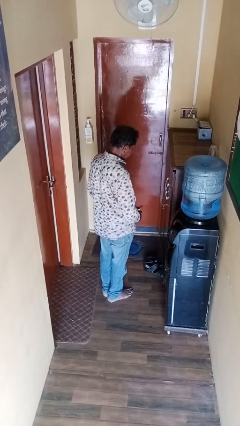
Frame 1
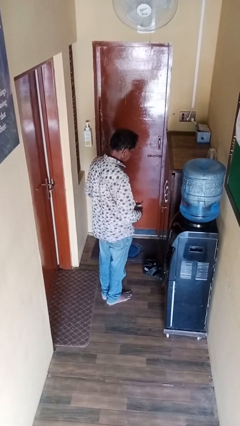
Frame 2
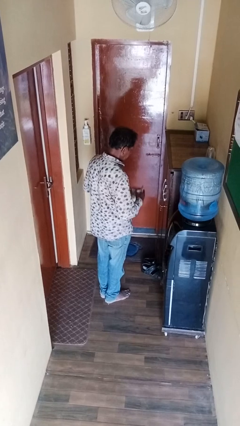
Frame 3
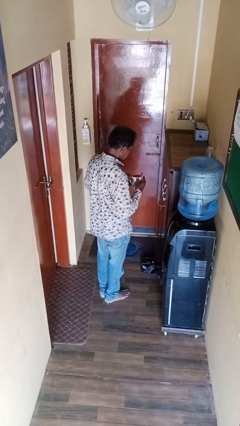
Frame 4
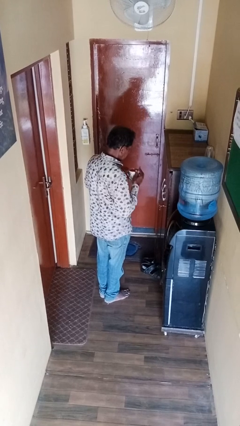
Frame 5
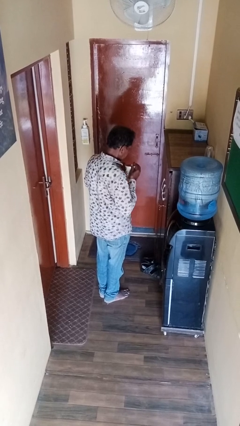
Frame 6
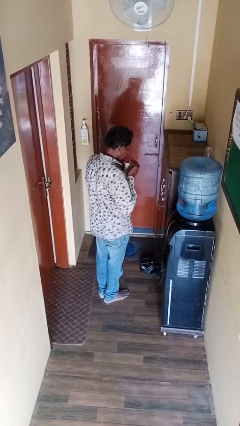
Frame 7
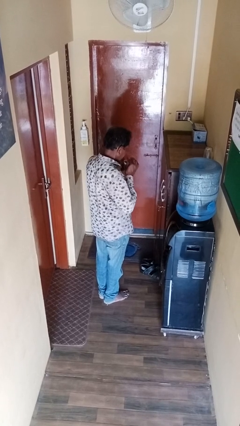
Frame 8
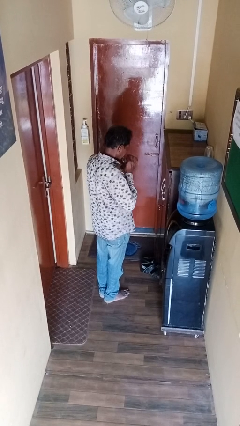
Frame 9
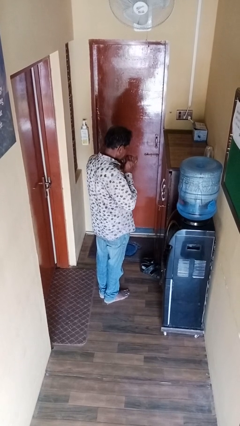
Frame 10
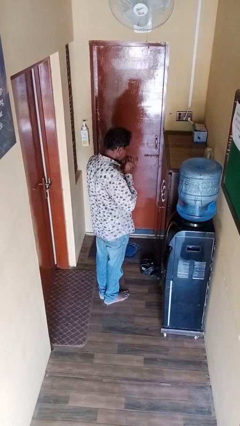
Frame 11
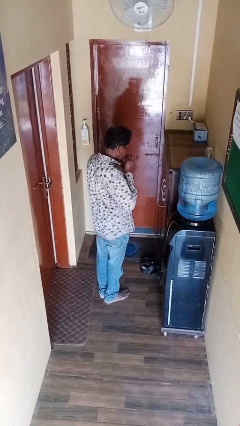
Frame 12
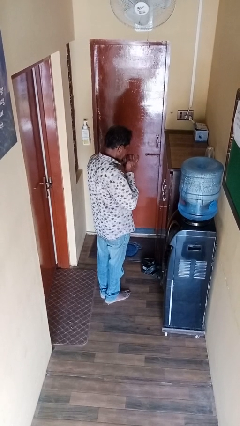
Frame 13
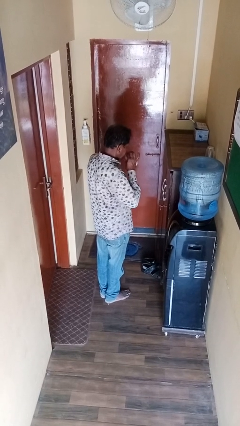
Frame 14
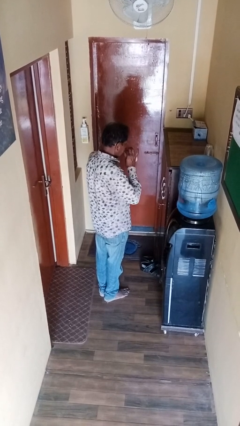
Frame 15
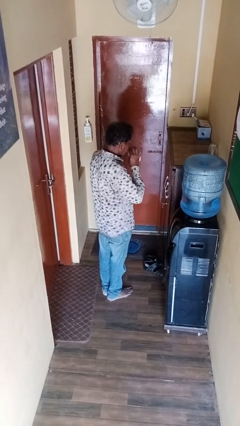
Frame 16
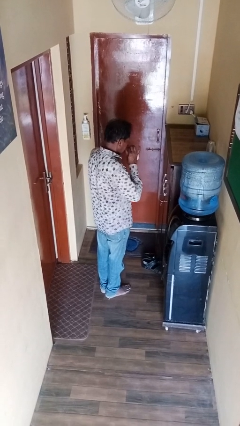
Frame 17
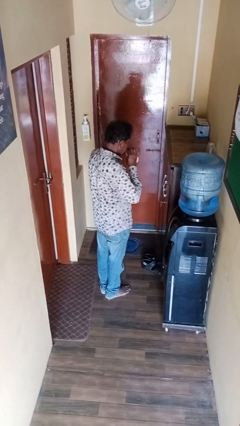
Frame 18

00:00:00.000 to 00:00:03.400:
person drinks from straw

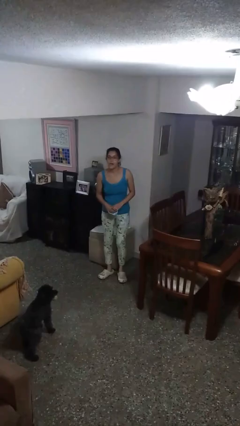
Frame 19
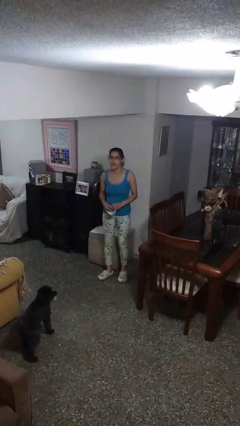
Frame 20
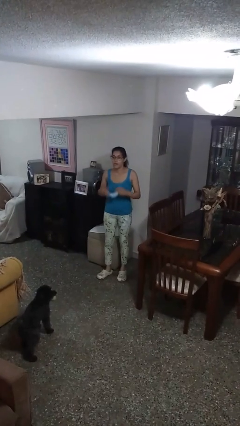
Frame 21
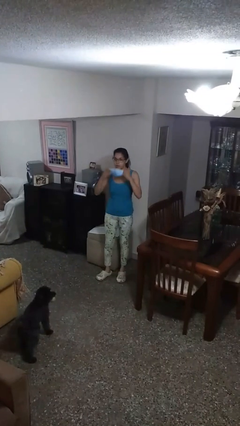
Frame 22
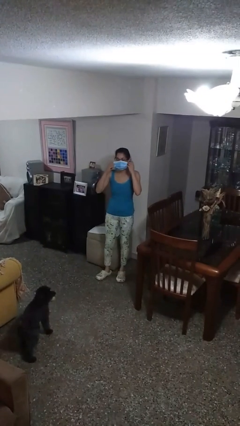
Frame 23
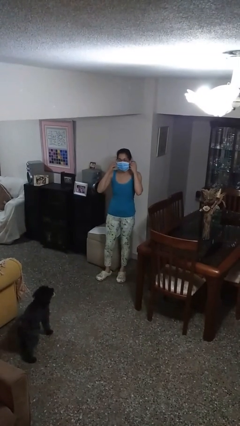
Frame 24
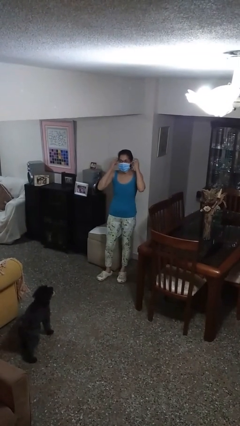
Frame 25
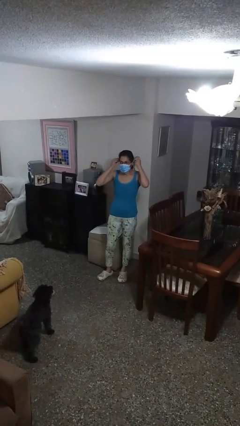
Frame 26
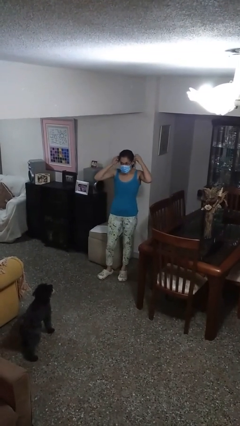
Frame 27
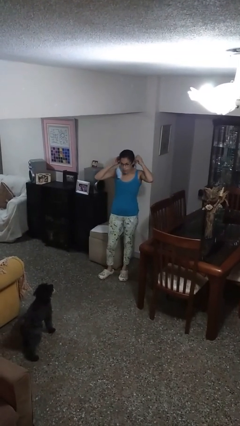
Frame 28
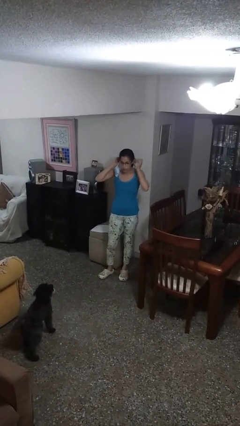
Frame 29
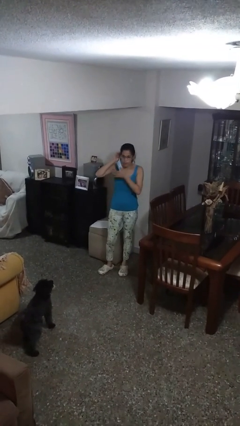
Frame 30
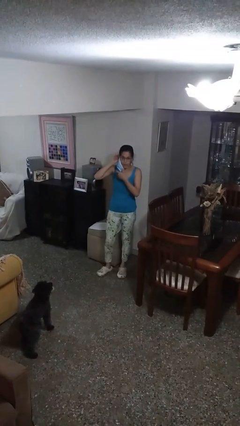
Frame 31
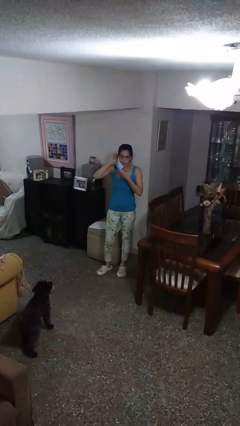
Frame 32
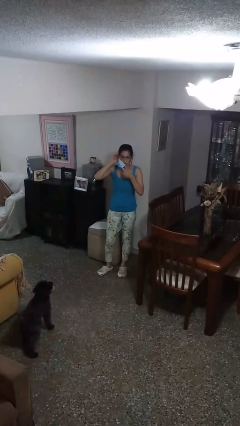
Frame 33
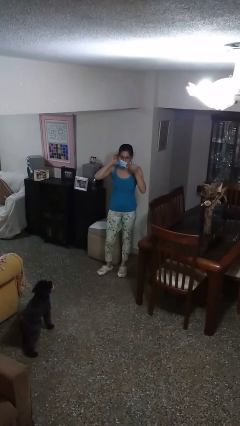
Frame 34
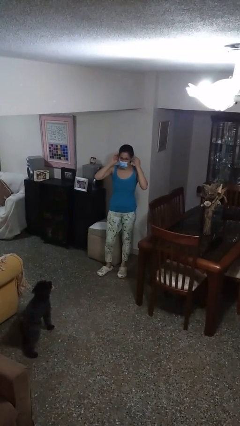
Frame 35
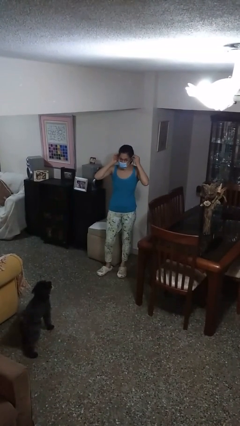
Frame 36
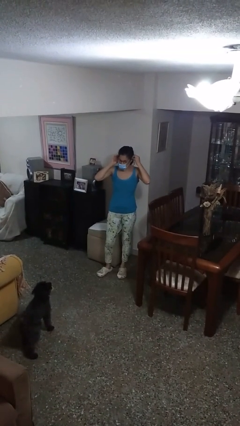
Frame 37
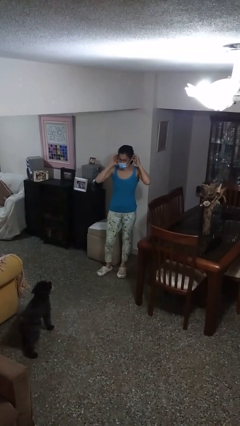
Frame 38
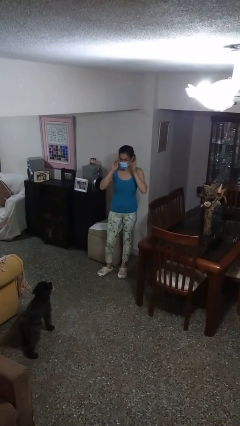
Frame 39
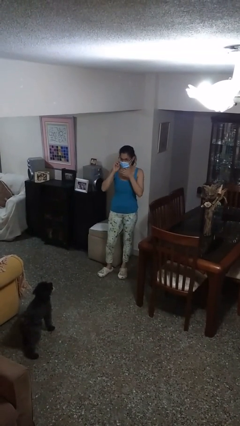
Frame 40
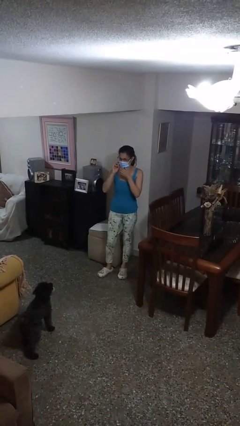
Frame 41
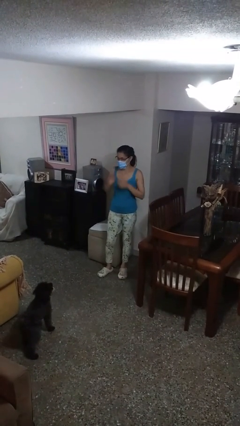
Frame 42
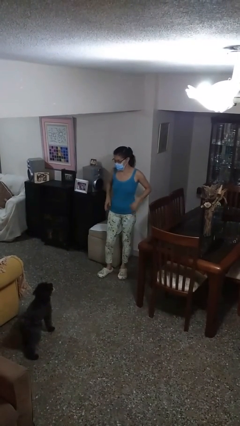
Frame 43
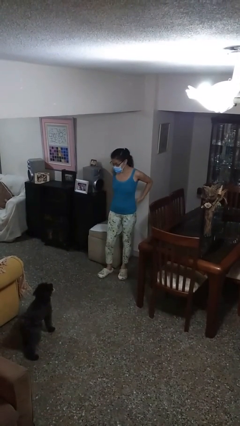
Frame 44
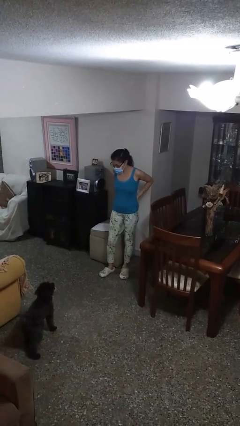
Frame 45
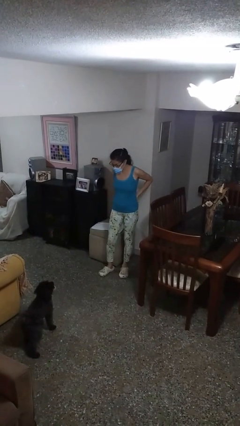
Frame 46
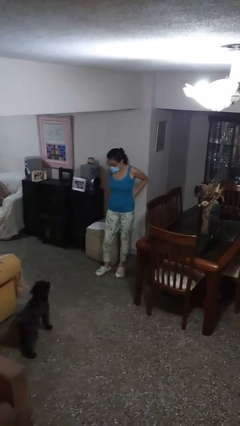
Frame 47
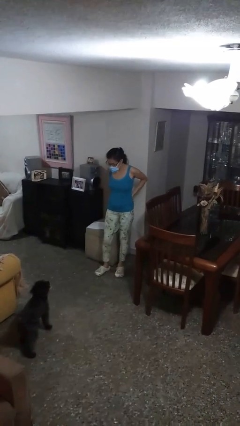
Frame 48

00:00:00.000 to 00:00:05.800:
person puts on facemask

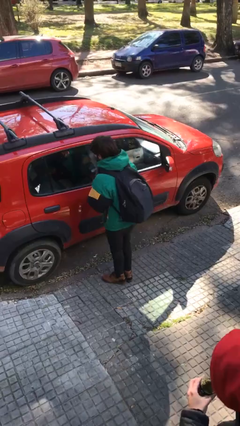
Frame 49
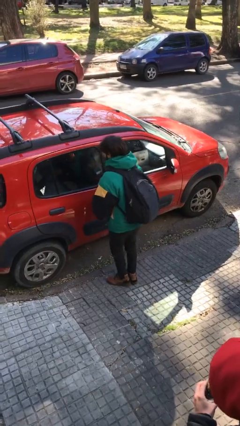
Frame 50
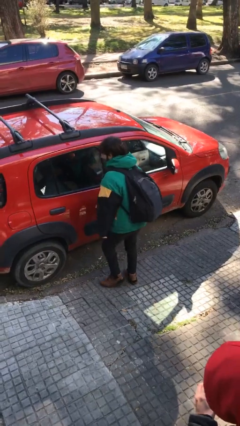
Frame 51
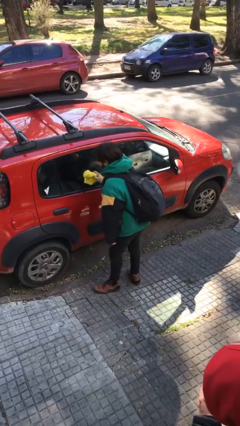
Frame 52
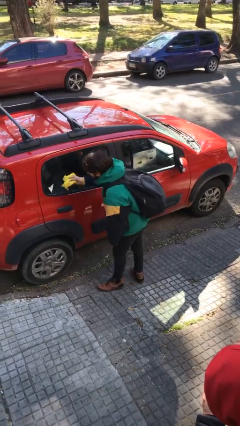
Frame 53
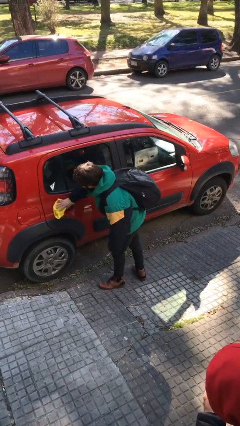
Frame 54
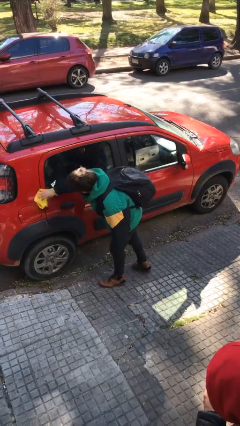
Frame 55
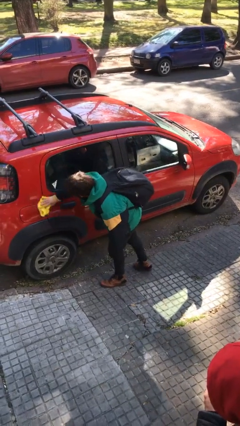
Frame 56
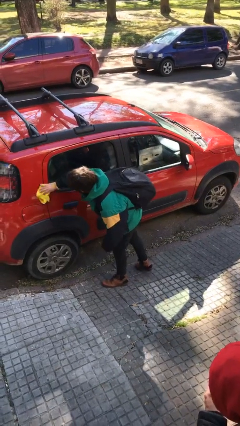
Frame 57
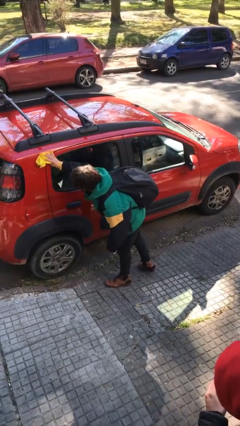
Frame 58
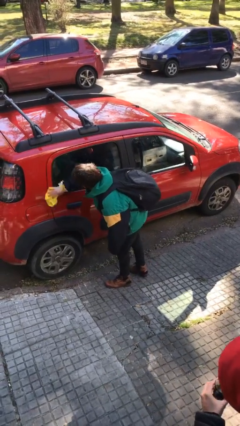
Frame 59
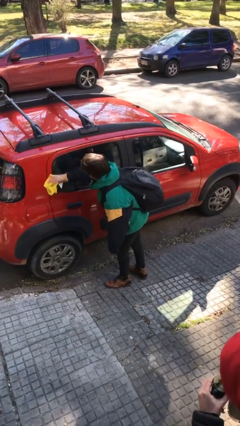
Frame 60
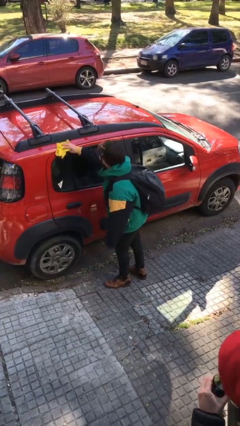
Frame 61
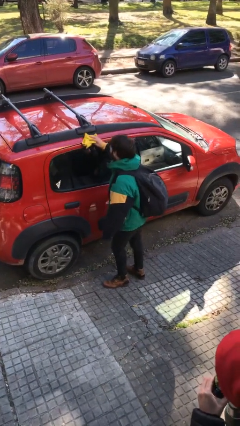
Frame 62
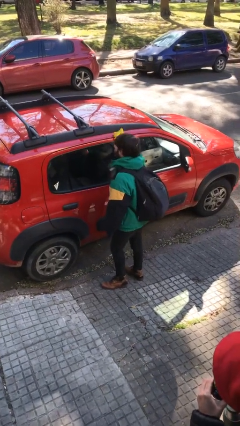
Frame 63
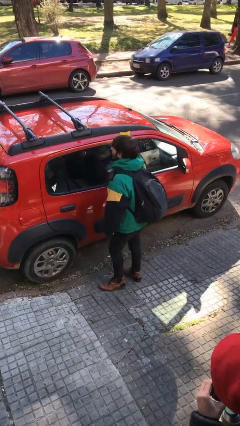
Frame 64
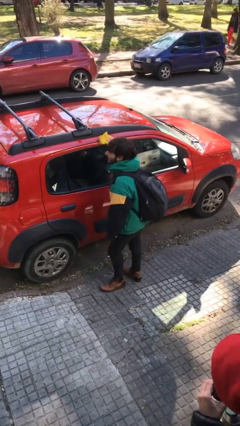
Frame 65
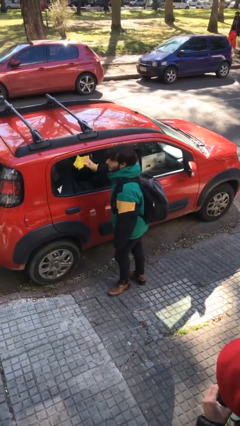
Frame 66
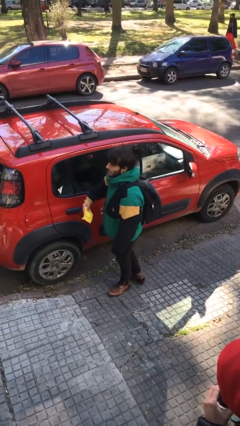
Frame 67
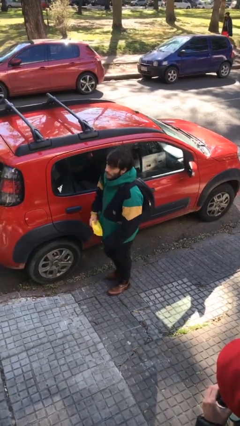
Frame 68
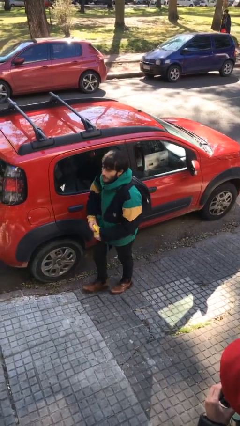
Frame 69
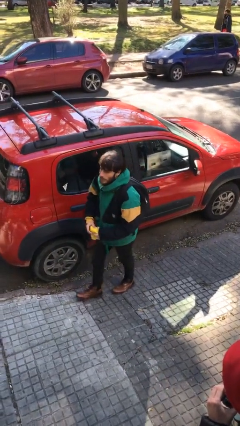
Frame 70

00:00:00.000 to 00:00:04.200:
person polishes car with rag

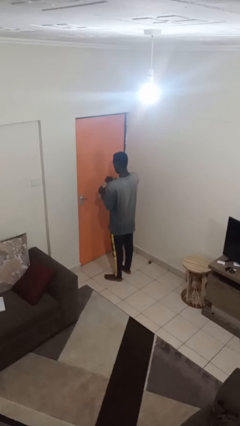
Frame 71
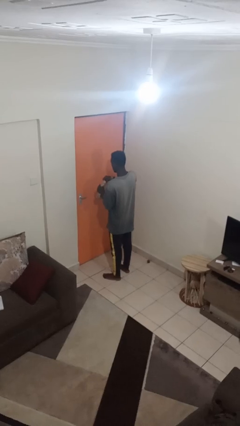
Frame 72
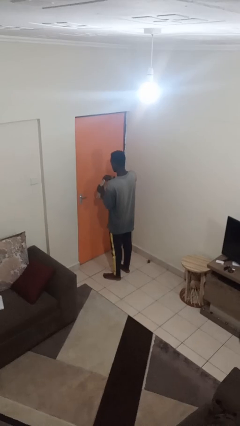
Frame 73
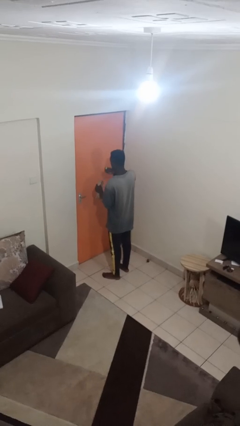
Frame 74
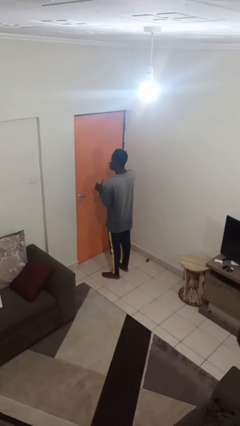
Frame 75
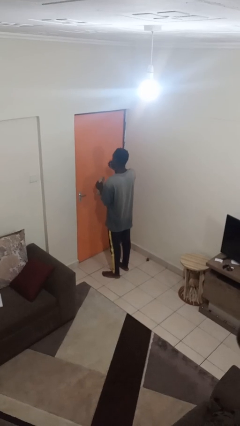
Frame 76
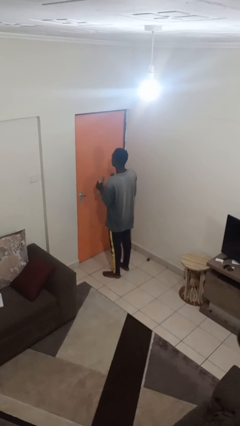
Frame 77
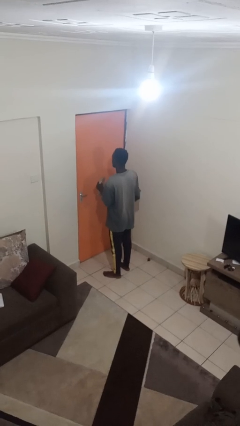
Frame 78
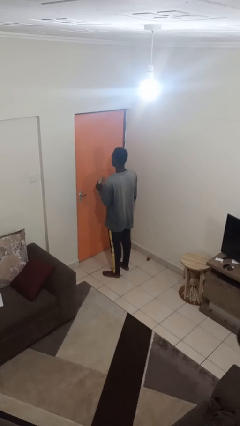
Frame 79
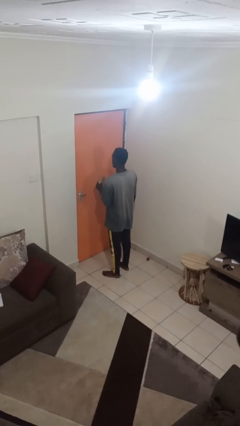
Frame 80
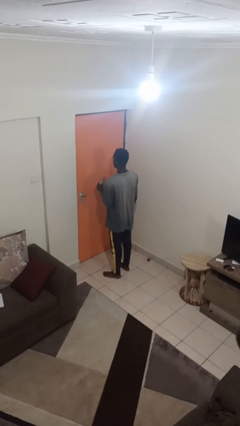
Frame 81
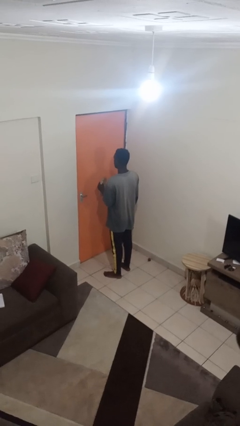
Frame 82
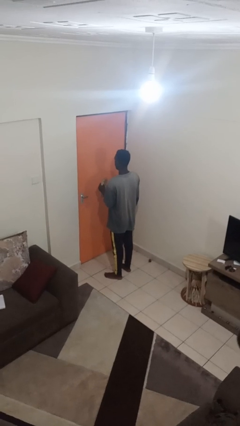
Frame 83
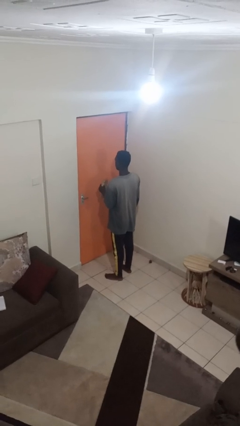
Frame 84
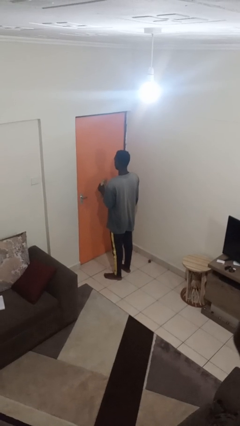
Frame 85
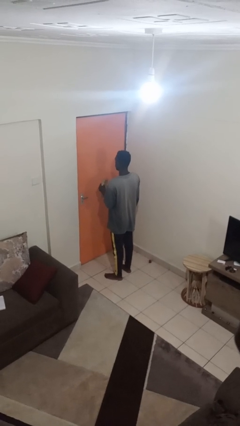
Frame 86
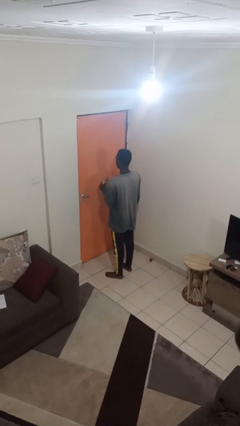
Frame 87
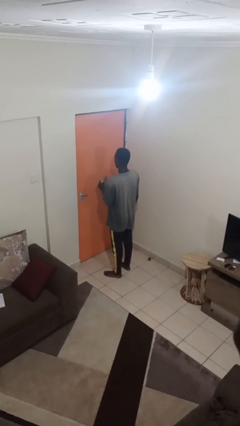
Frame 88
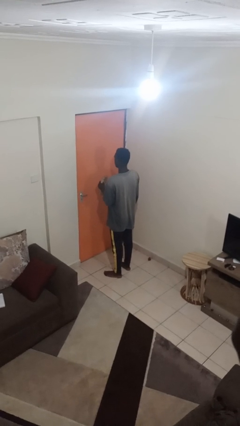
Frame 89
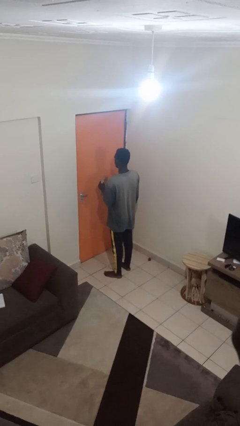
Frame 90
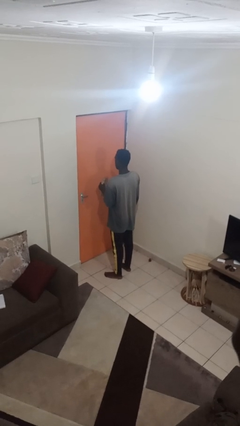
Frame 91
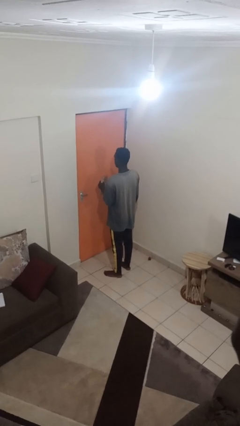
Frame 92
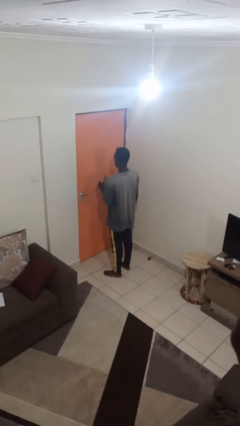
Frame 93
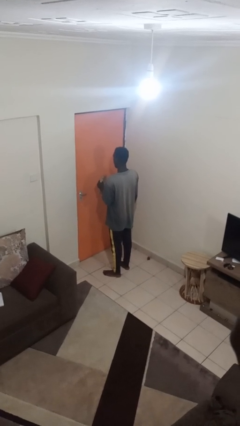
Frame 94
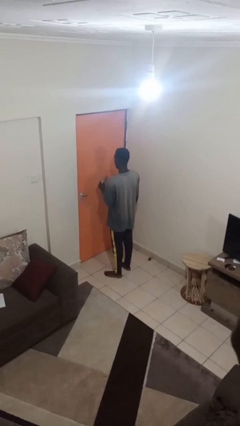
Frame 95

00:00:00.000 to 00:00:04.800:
person eats snack from bag
